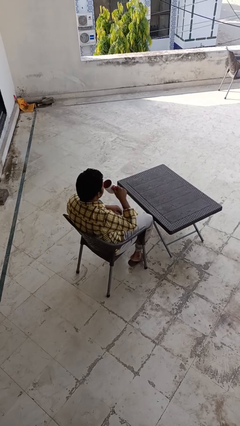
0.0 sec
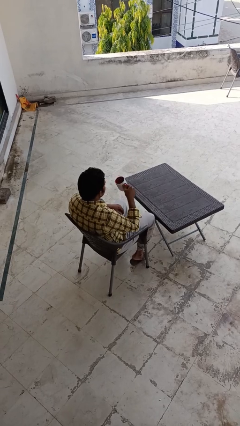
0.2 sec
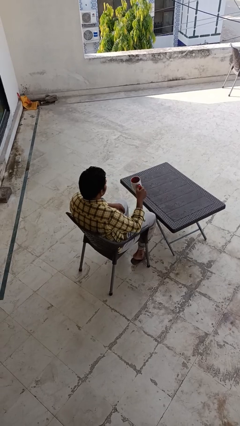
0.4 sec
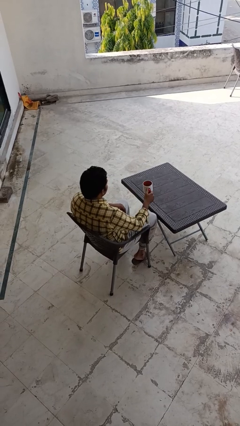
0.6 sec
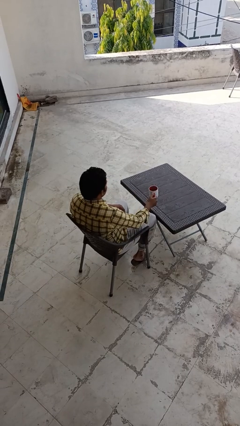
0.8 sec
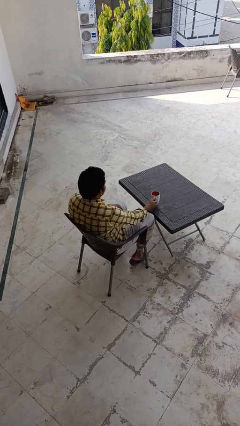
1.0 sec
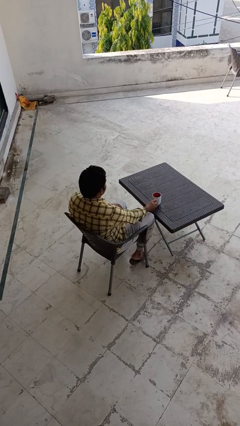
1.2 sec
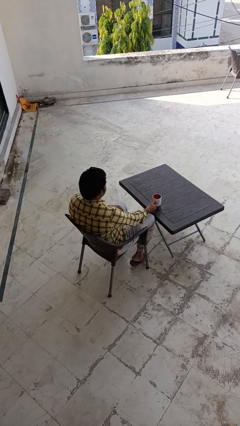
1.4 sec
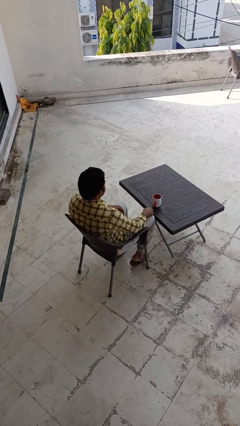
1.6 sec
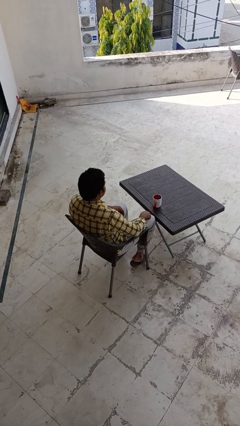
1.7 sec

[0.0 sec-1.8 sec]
person puts down object on table

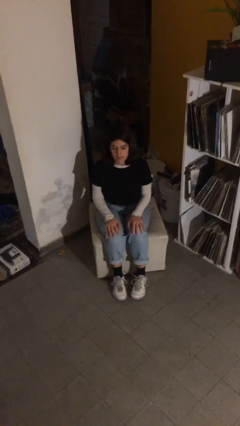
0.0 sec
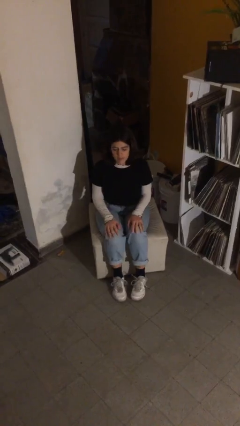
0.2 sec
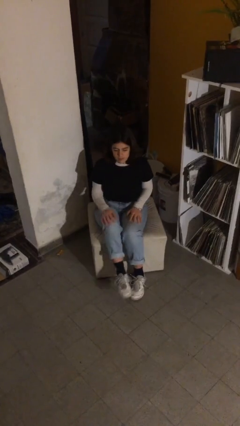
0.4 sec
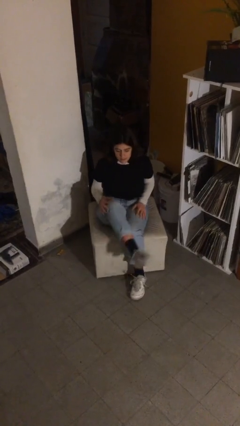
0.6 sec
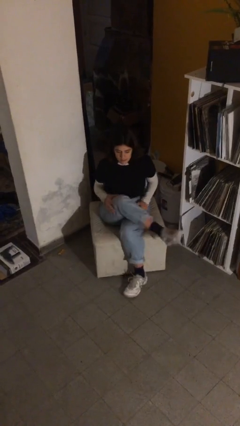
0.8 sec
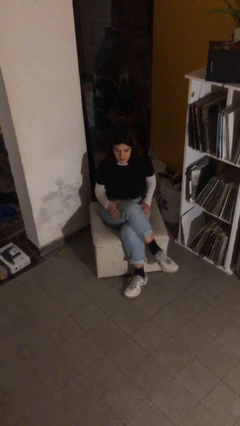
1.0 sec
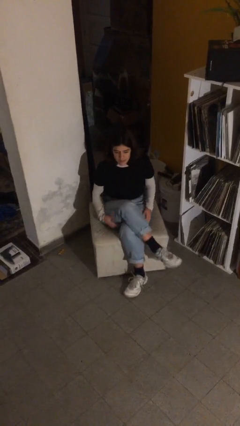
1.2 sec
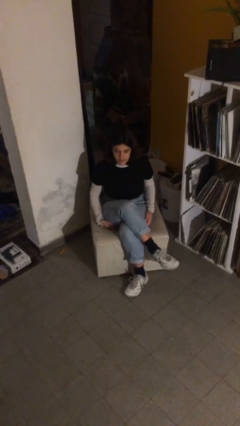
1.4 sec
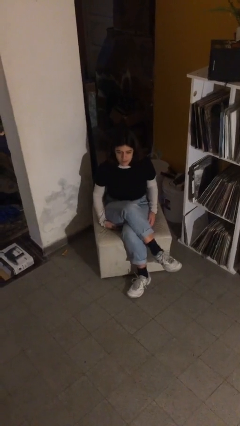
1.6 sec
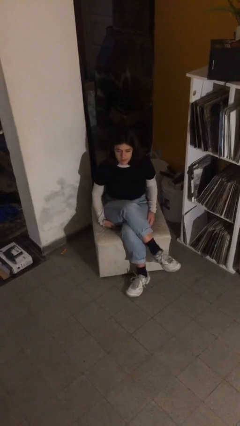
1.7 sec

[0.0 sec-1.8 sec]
person crosses legs

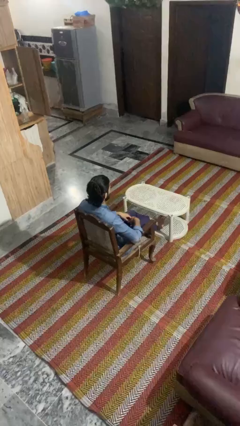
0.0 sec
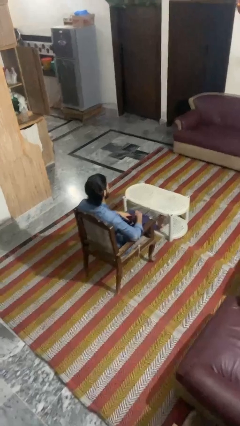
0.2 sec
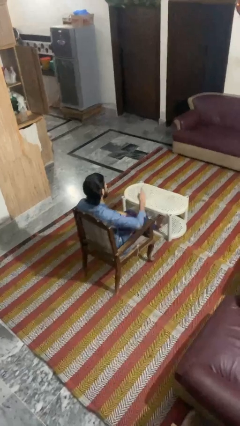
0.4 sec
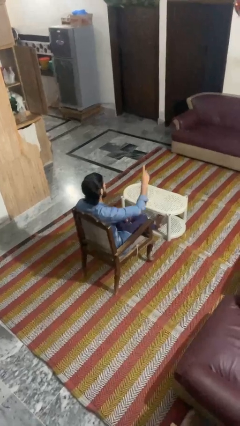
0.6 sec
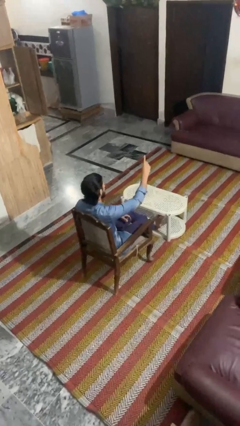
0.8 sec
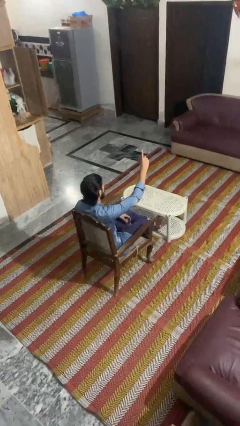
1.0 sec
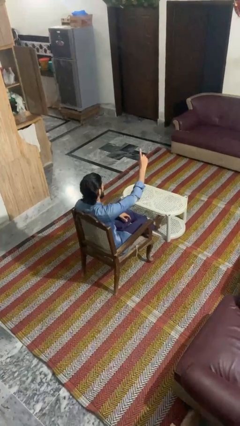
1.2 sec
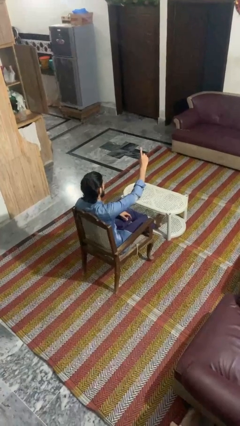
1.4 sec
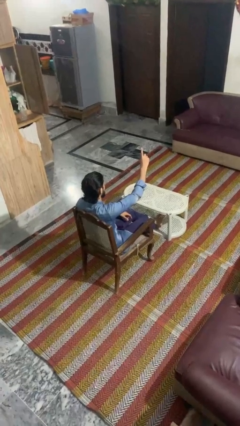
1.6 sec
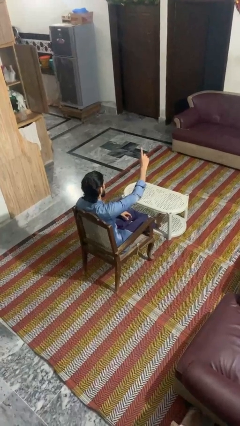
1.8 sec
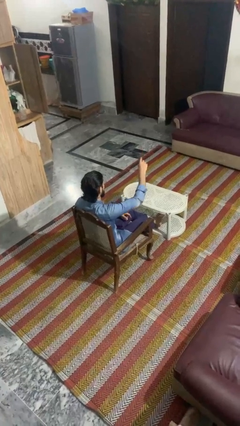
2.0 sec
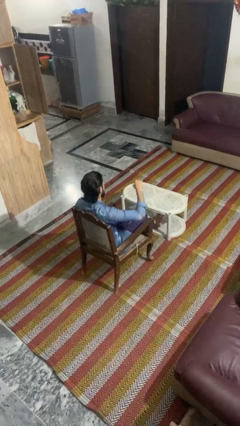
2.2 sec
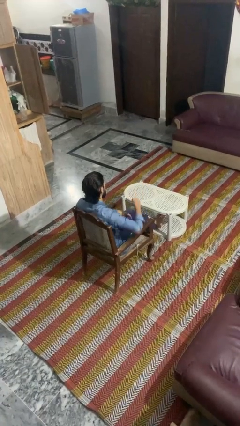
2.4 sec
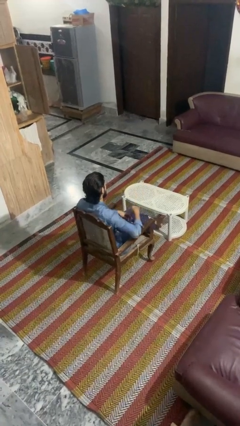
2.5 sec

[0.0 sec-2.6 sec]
person gestures number one

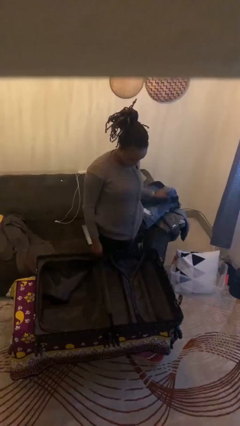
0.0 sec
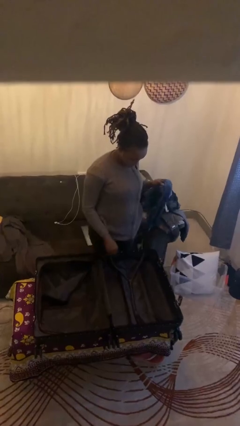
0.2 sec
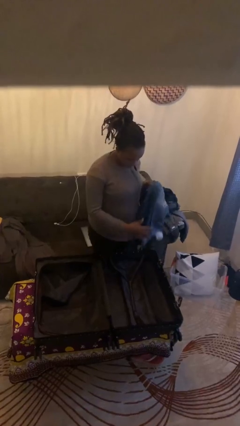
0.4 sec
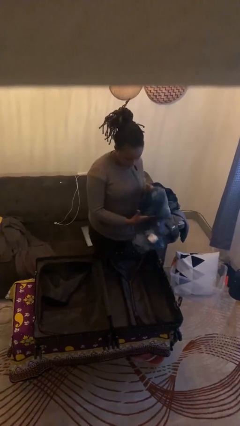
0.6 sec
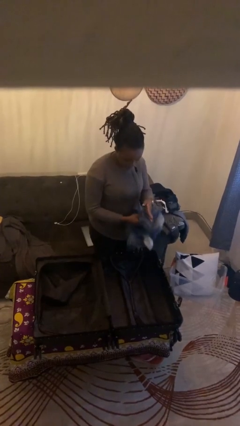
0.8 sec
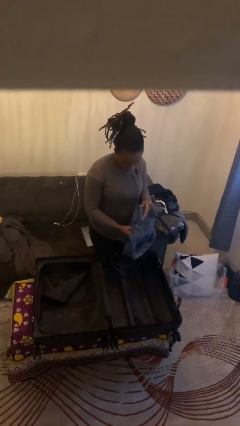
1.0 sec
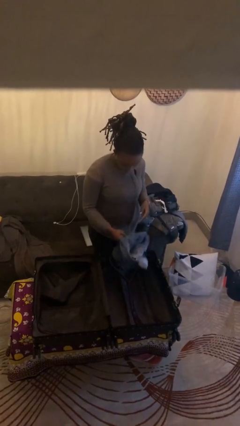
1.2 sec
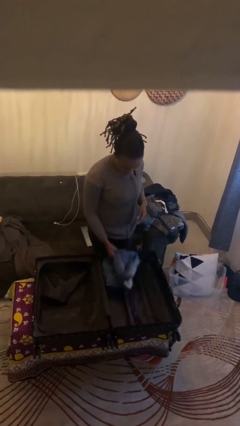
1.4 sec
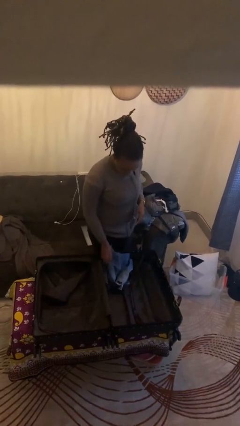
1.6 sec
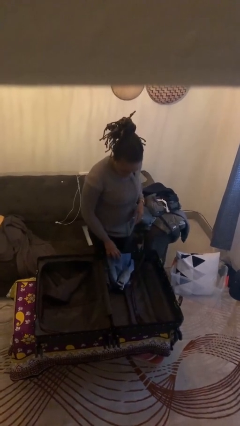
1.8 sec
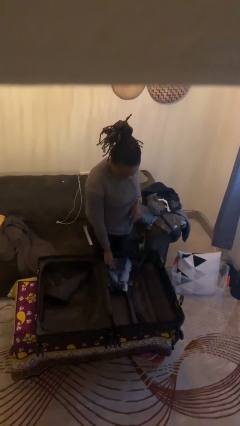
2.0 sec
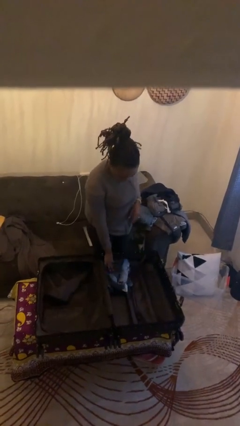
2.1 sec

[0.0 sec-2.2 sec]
person loads clothes into suitcase

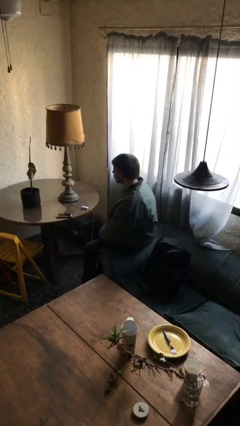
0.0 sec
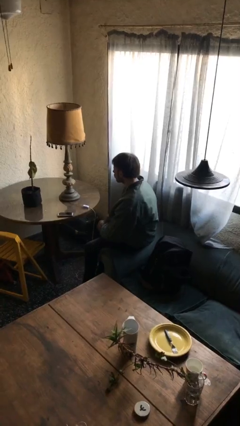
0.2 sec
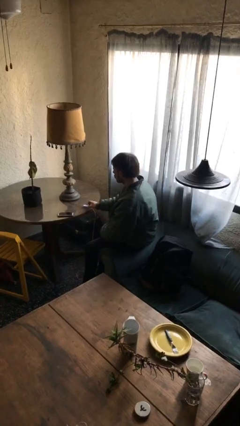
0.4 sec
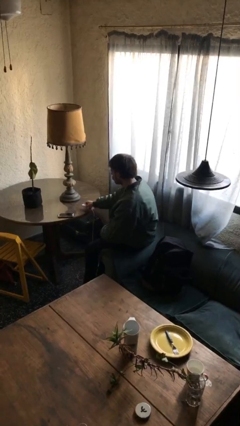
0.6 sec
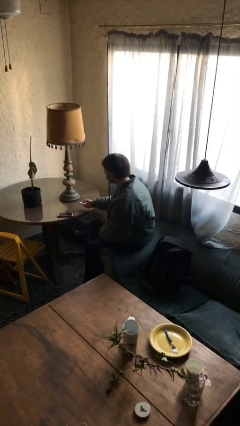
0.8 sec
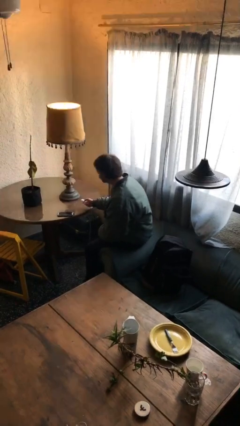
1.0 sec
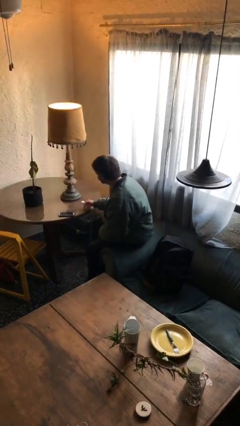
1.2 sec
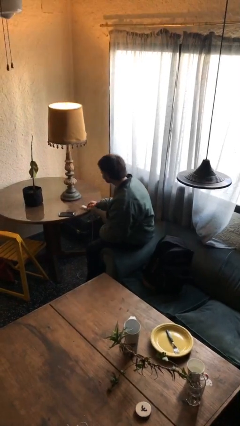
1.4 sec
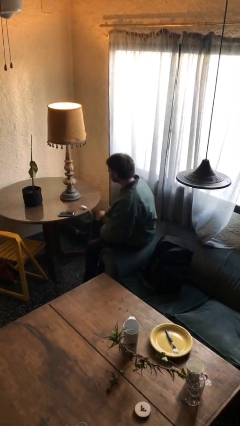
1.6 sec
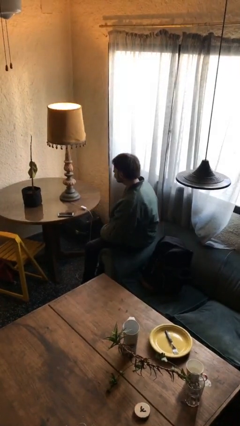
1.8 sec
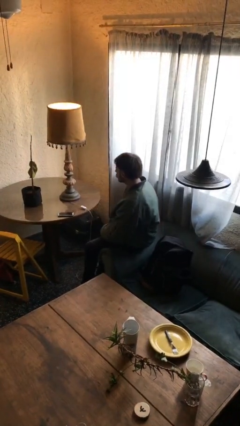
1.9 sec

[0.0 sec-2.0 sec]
person turns on lamp

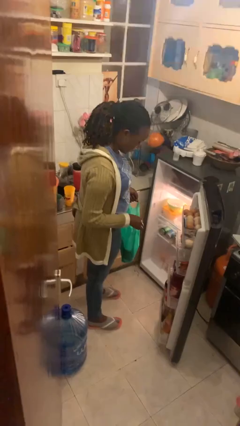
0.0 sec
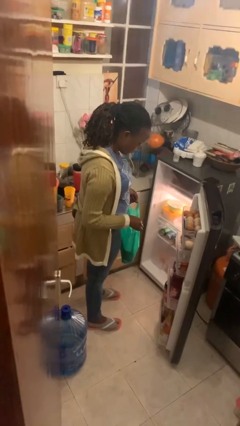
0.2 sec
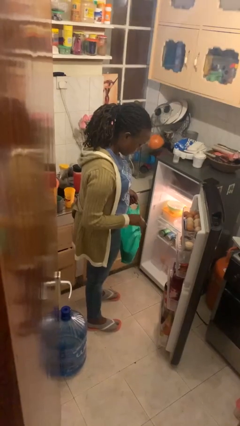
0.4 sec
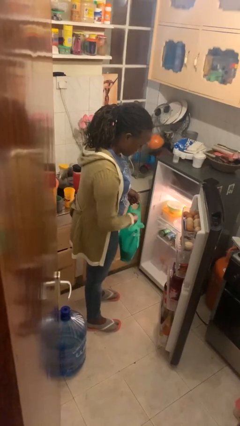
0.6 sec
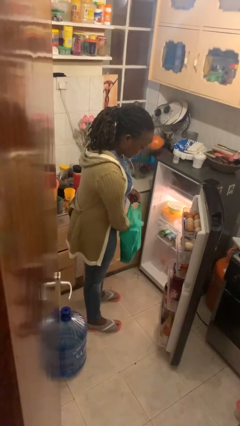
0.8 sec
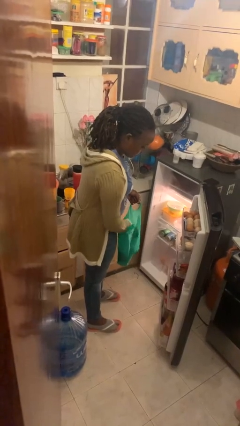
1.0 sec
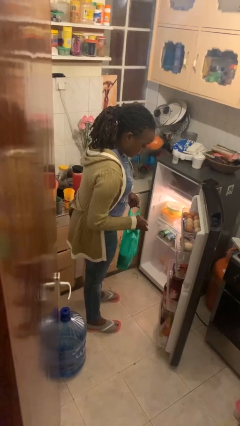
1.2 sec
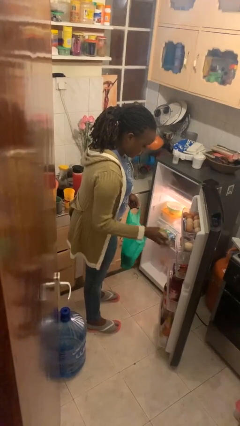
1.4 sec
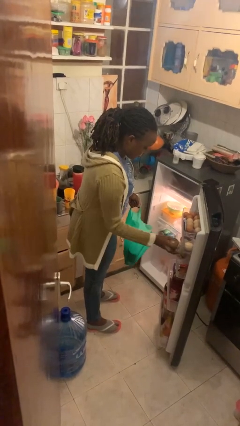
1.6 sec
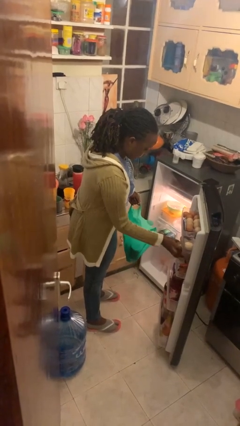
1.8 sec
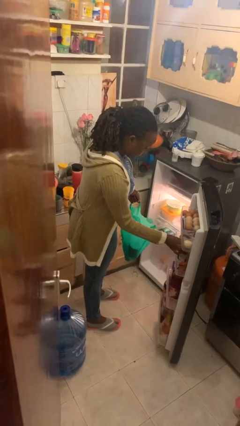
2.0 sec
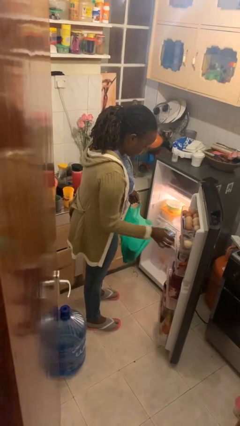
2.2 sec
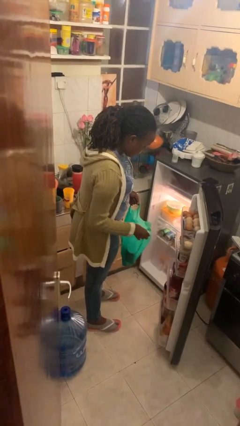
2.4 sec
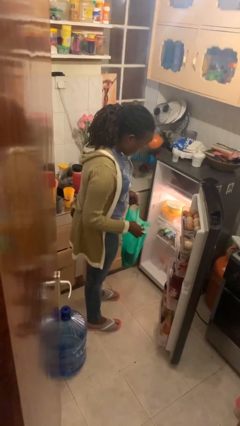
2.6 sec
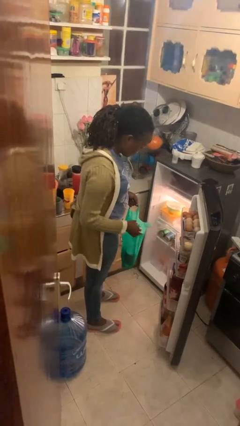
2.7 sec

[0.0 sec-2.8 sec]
person loads groceries into refrigerator

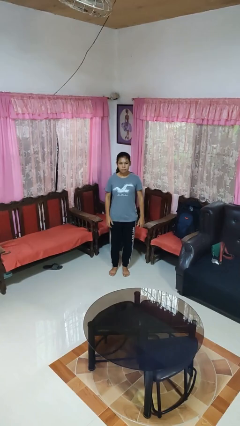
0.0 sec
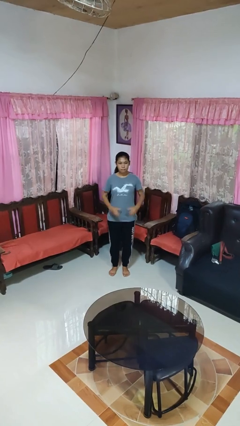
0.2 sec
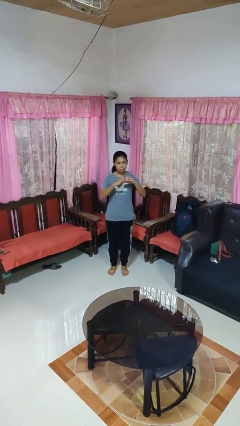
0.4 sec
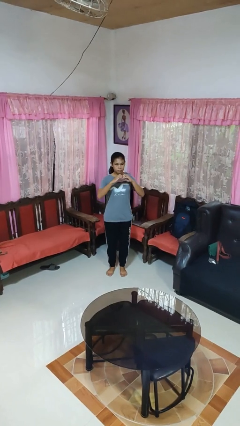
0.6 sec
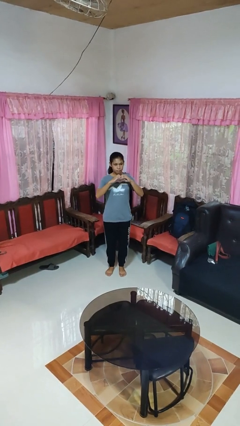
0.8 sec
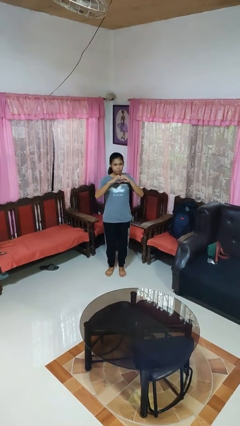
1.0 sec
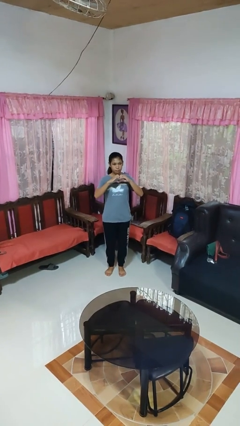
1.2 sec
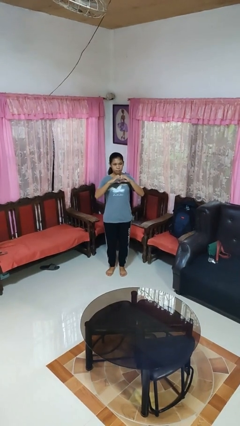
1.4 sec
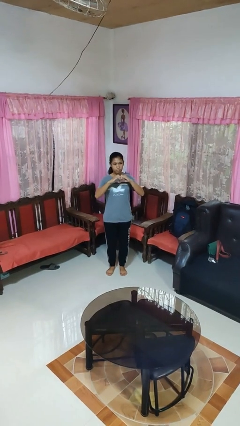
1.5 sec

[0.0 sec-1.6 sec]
person gestures heart

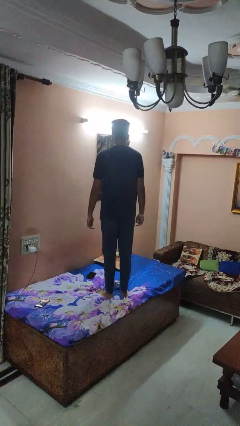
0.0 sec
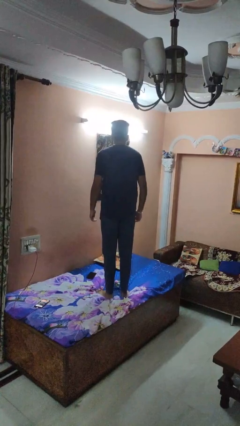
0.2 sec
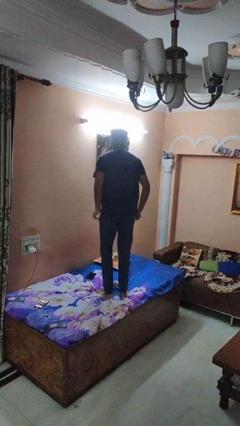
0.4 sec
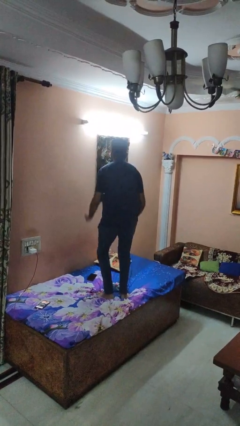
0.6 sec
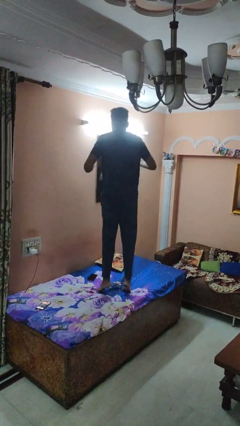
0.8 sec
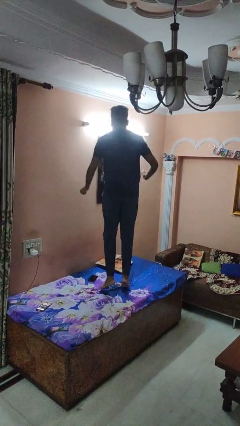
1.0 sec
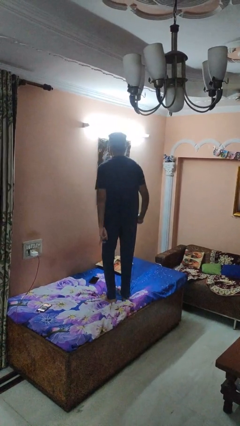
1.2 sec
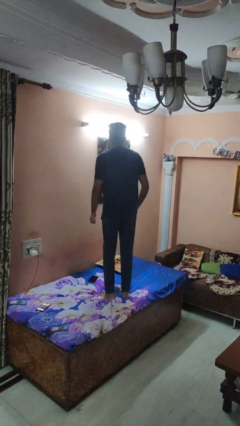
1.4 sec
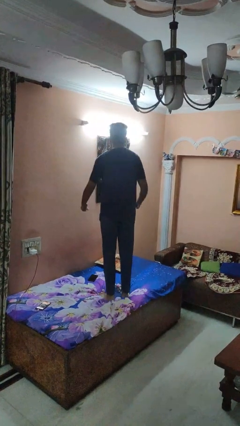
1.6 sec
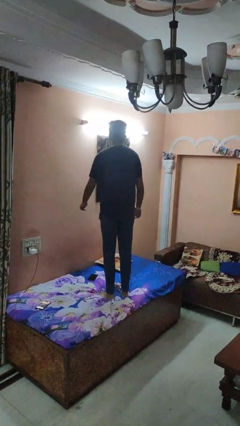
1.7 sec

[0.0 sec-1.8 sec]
person jumps on bed

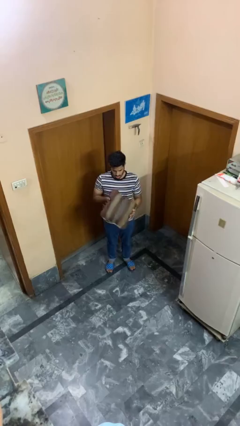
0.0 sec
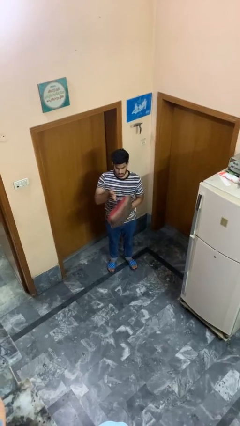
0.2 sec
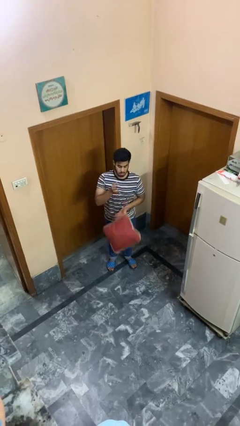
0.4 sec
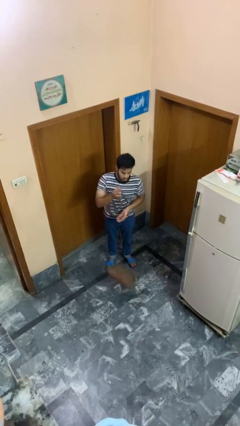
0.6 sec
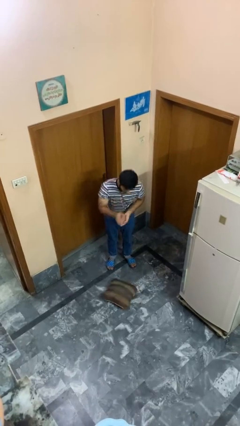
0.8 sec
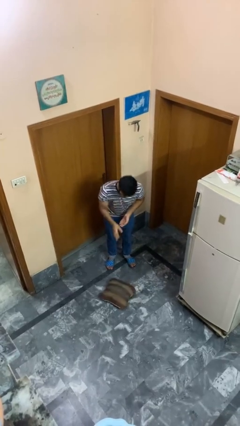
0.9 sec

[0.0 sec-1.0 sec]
person drops object
